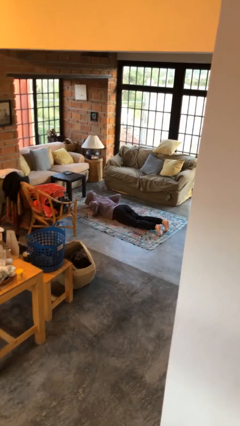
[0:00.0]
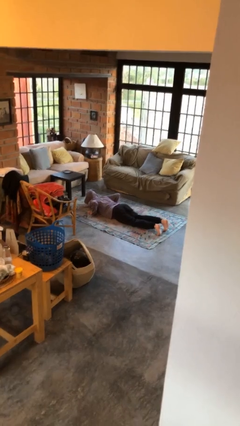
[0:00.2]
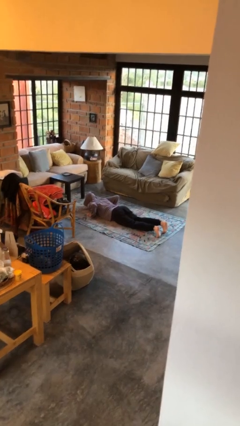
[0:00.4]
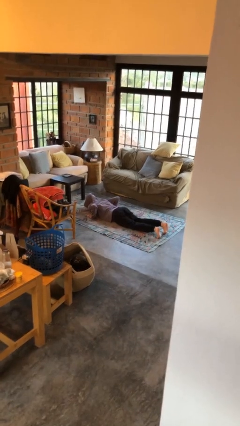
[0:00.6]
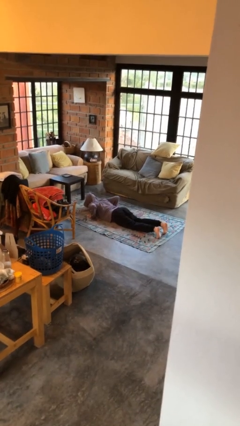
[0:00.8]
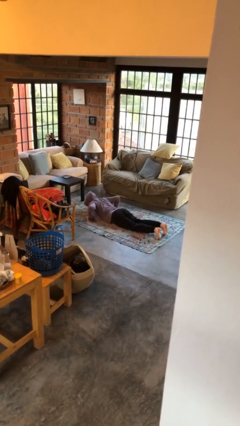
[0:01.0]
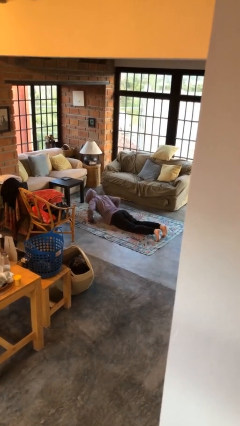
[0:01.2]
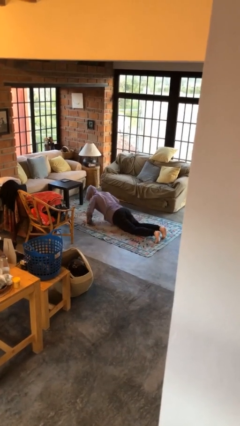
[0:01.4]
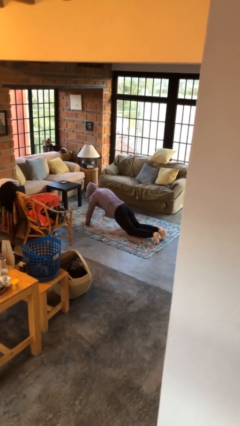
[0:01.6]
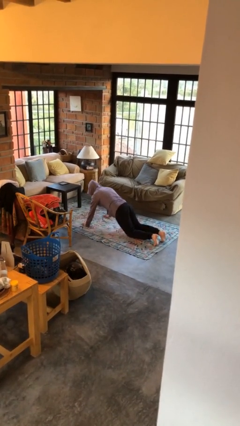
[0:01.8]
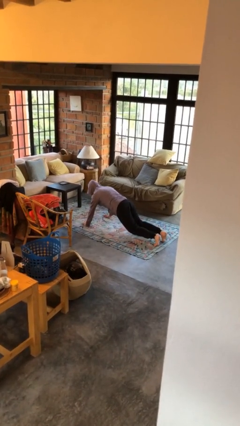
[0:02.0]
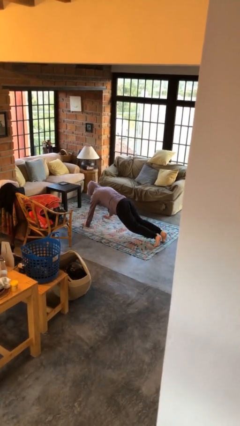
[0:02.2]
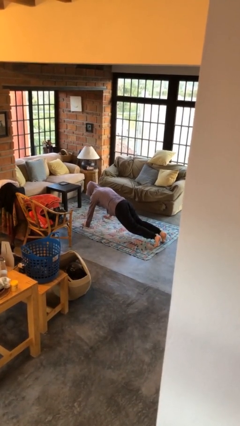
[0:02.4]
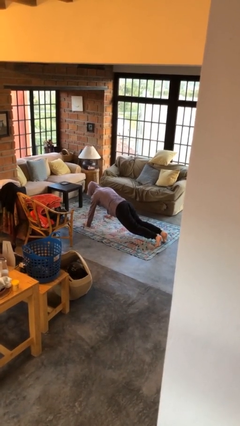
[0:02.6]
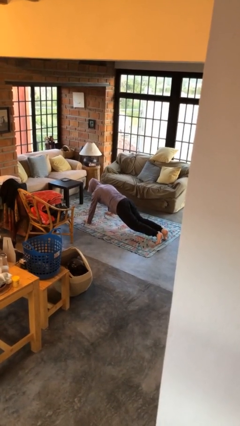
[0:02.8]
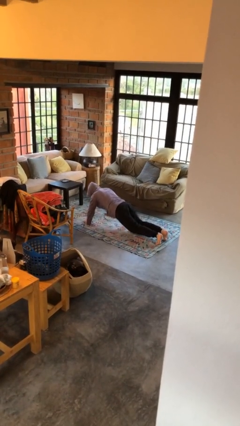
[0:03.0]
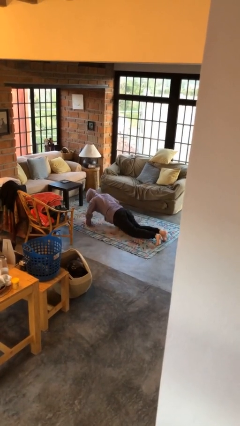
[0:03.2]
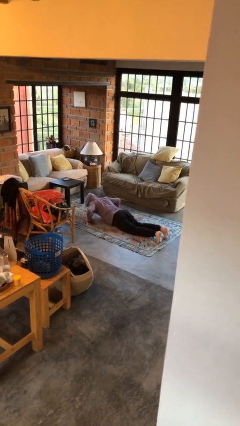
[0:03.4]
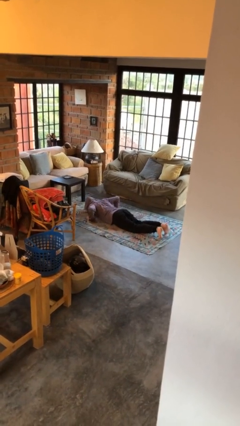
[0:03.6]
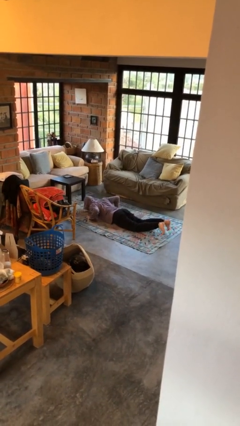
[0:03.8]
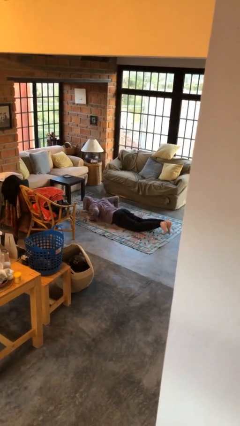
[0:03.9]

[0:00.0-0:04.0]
person exercises with pushup

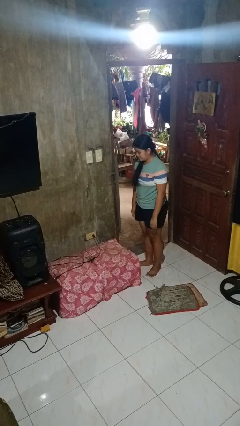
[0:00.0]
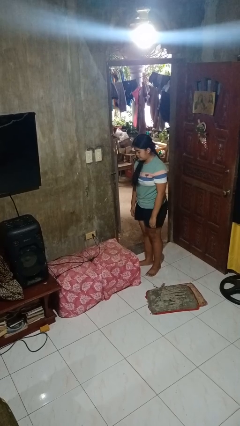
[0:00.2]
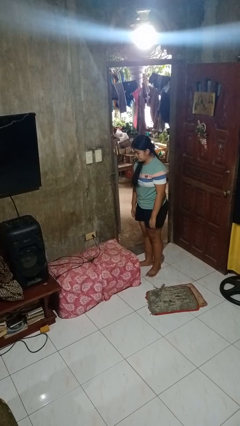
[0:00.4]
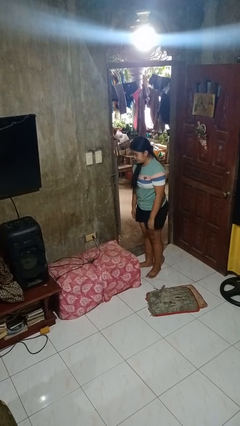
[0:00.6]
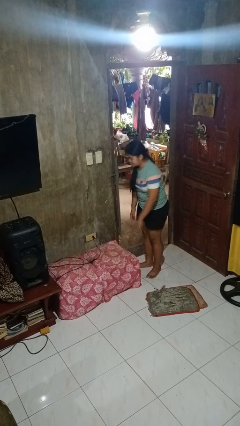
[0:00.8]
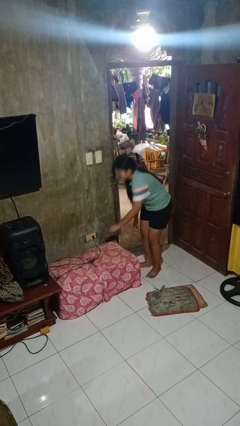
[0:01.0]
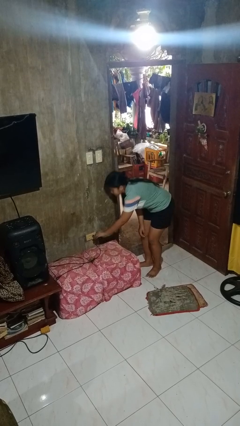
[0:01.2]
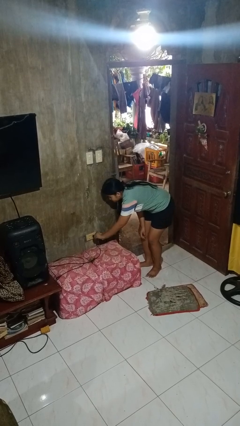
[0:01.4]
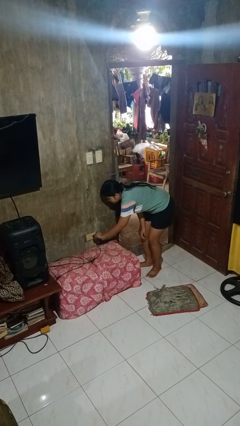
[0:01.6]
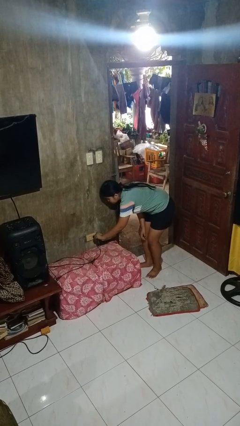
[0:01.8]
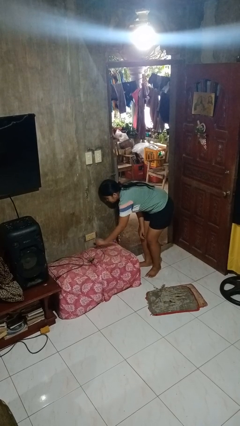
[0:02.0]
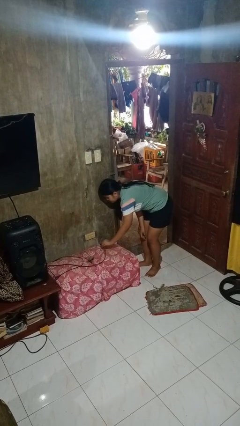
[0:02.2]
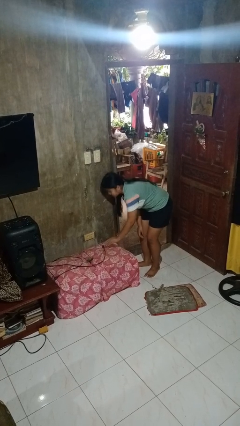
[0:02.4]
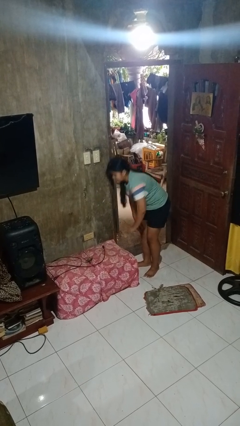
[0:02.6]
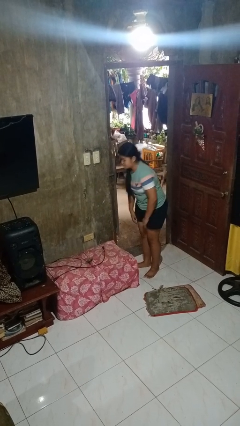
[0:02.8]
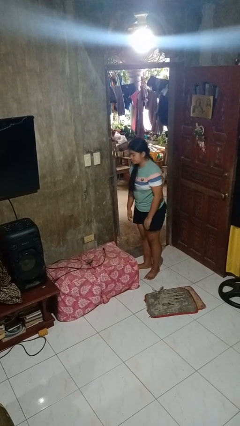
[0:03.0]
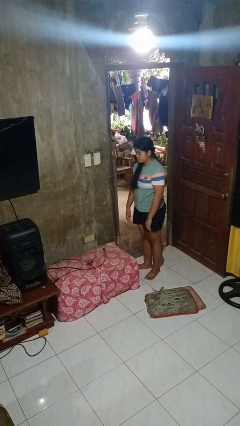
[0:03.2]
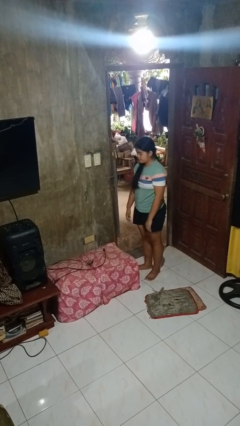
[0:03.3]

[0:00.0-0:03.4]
person unplugs from electrical socket

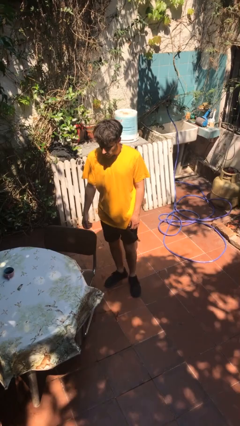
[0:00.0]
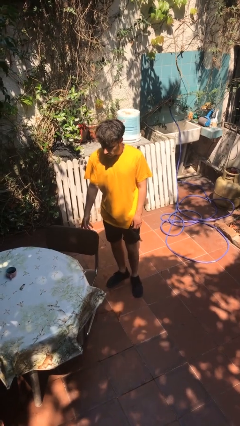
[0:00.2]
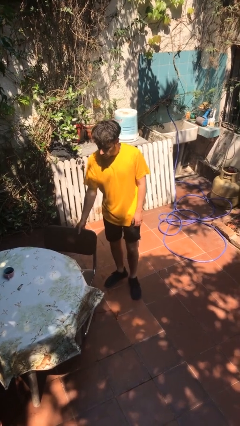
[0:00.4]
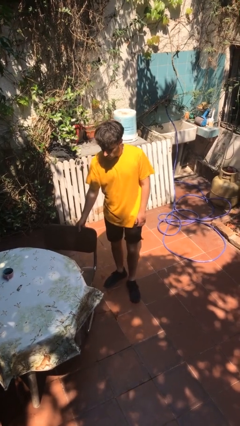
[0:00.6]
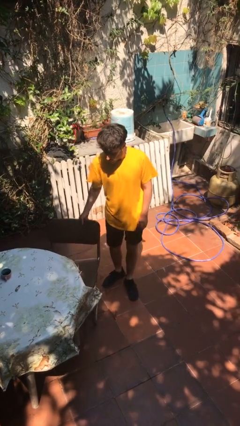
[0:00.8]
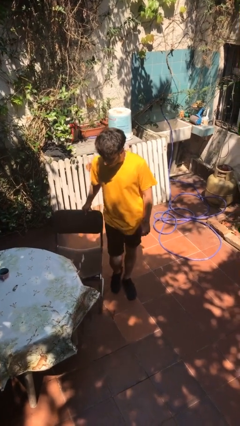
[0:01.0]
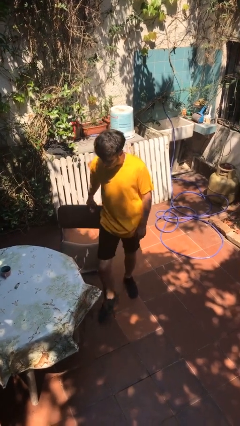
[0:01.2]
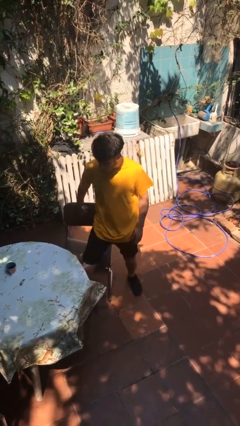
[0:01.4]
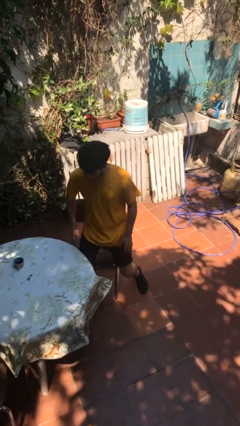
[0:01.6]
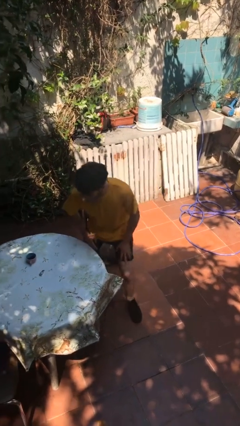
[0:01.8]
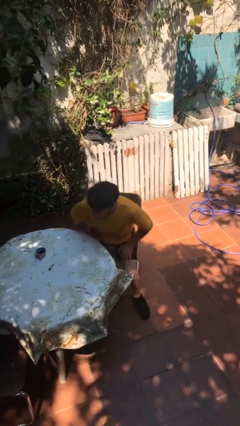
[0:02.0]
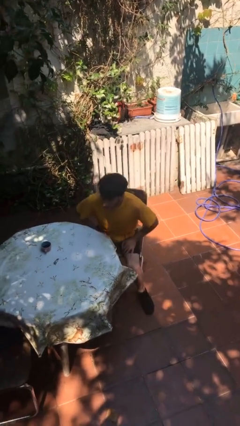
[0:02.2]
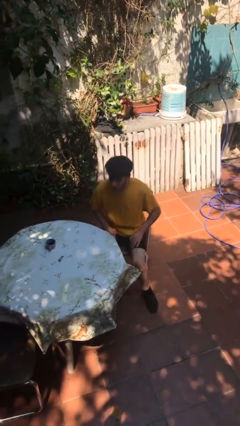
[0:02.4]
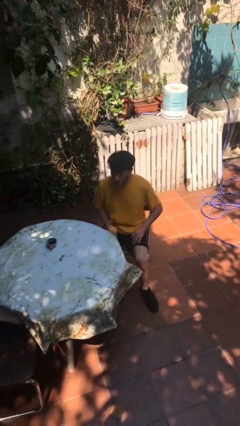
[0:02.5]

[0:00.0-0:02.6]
person sits down

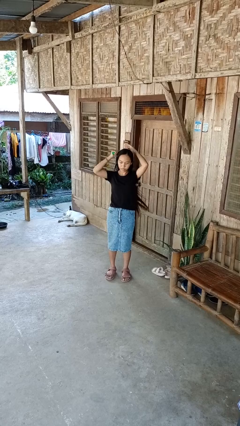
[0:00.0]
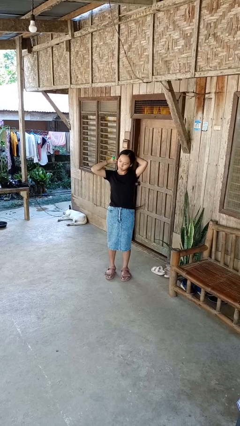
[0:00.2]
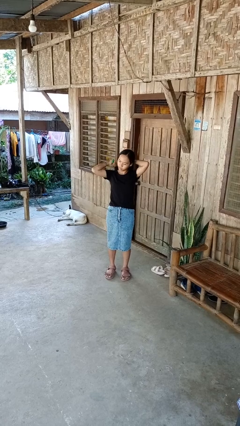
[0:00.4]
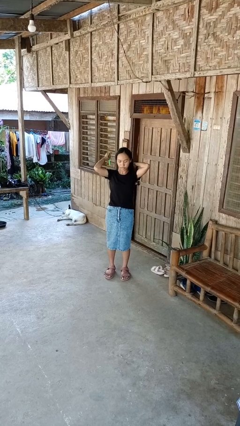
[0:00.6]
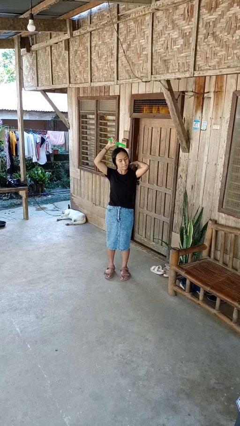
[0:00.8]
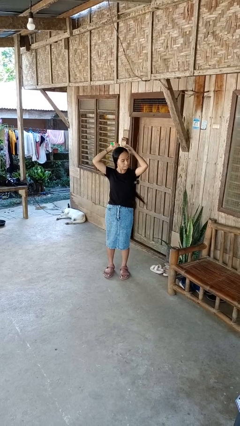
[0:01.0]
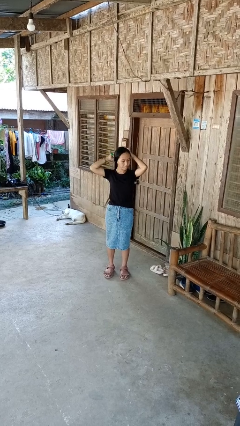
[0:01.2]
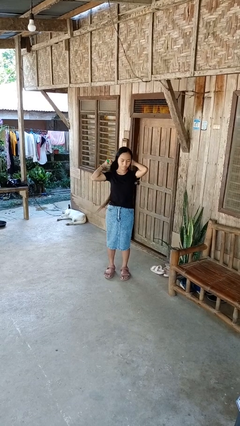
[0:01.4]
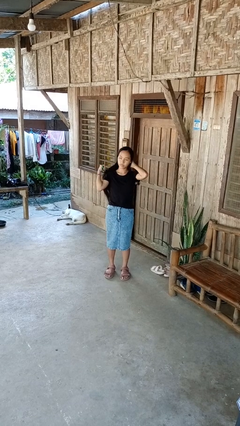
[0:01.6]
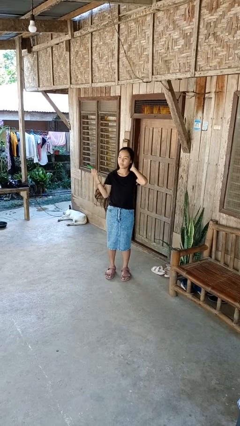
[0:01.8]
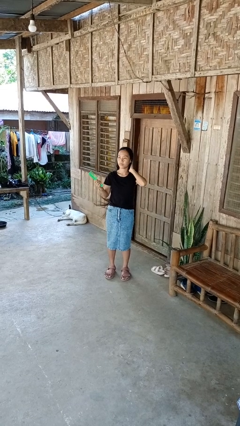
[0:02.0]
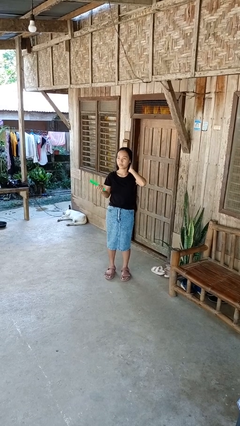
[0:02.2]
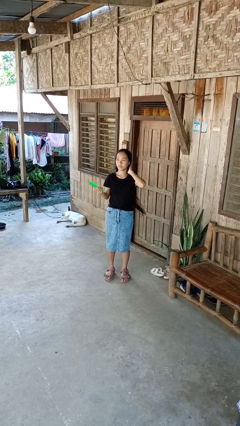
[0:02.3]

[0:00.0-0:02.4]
person brushes hair

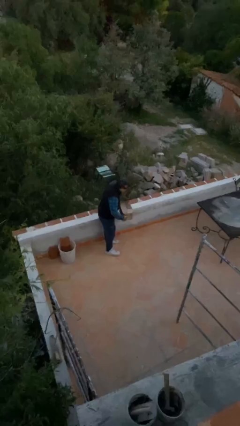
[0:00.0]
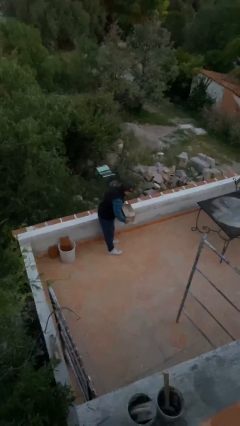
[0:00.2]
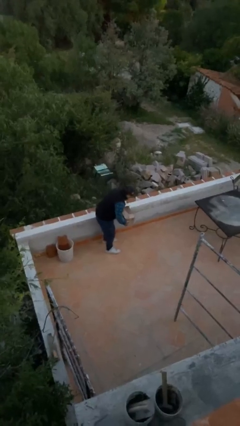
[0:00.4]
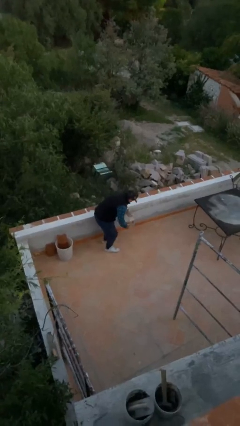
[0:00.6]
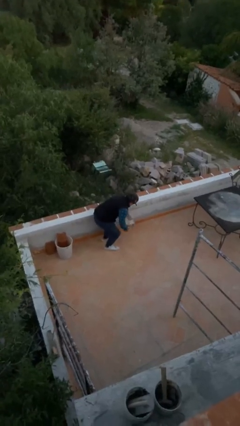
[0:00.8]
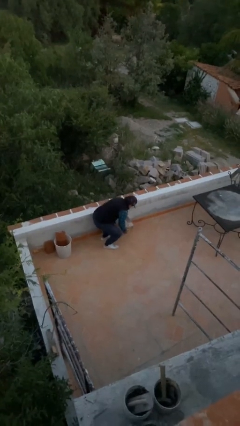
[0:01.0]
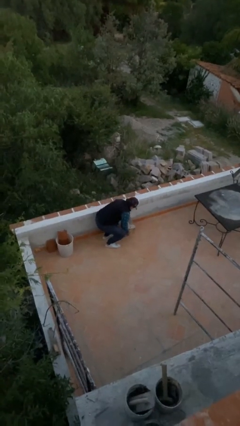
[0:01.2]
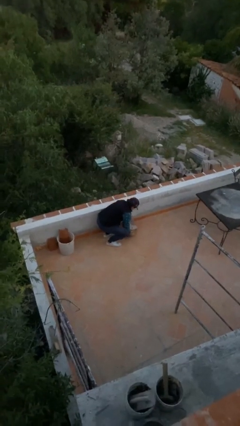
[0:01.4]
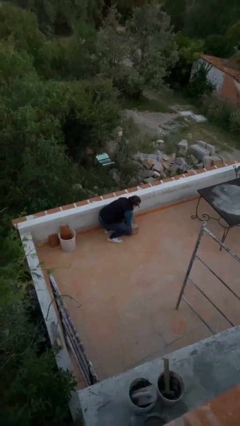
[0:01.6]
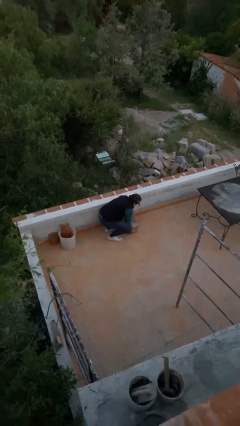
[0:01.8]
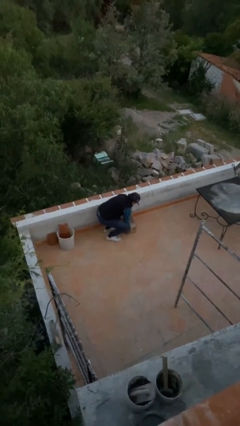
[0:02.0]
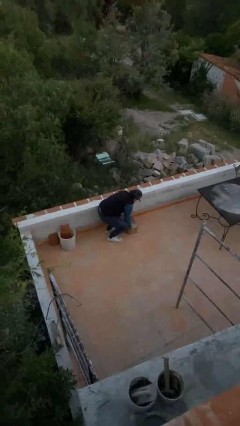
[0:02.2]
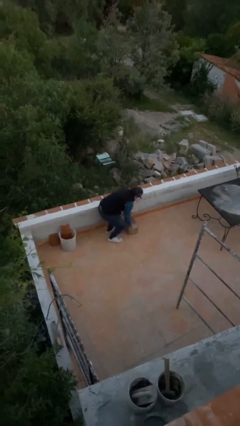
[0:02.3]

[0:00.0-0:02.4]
person puts down object on floor

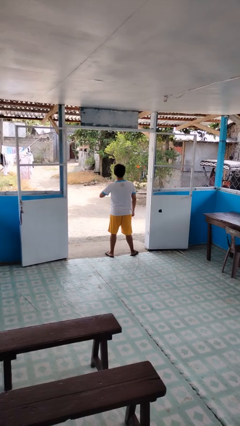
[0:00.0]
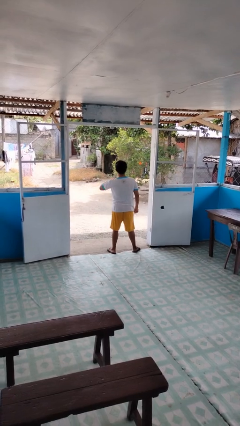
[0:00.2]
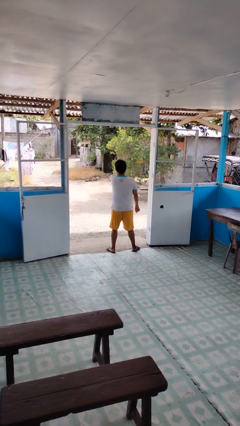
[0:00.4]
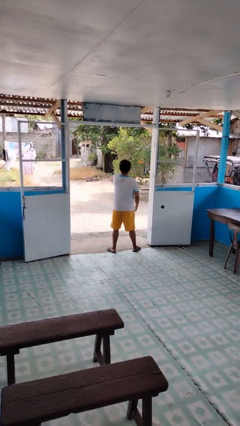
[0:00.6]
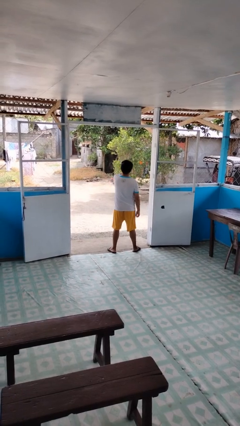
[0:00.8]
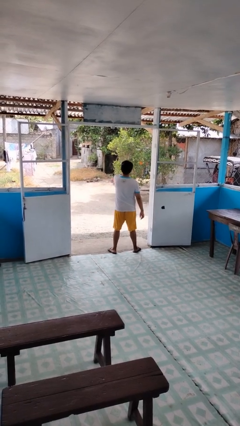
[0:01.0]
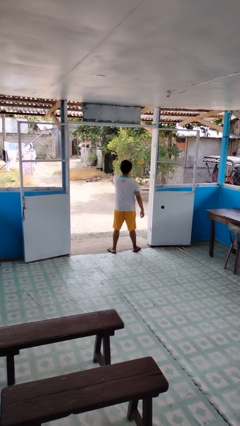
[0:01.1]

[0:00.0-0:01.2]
person punches

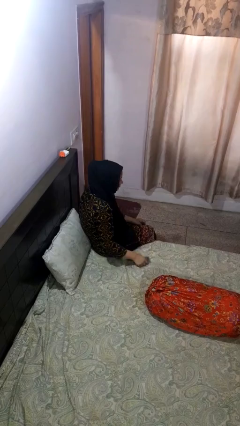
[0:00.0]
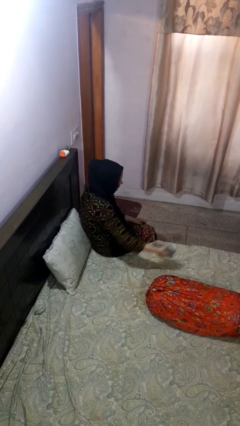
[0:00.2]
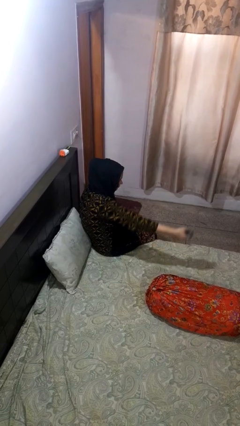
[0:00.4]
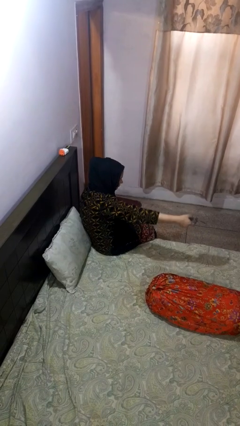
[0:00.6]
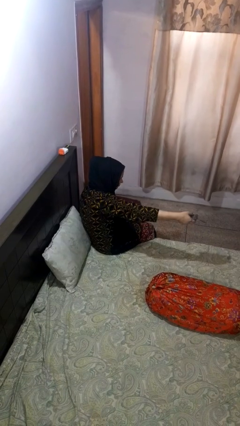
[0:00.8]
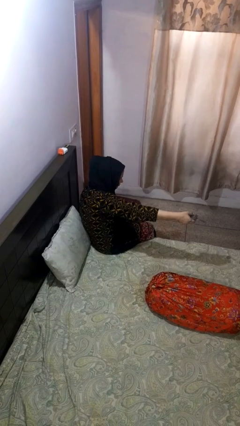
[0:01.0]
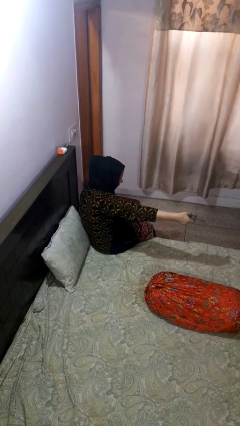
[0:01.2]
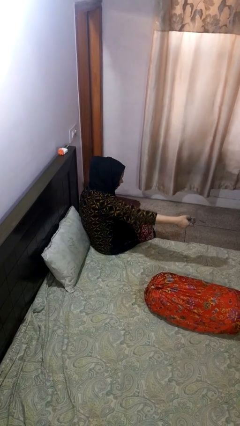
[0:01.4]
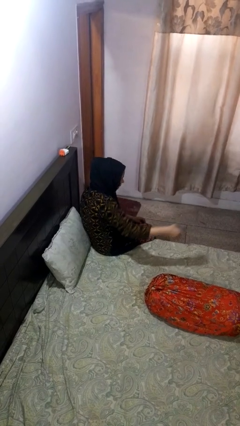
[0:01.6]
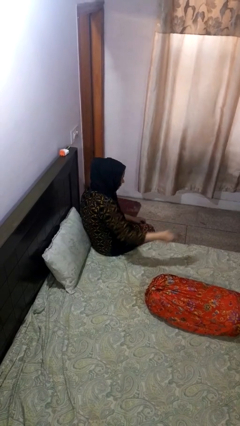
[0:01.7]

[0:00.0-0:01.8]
person uses television remote
